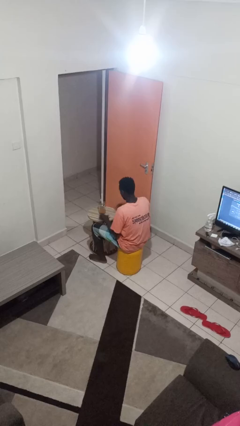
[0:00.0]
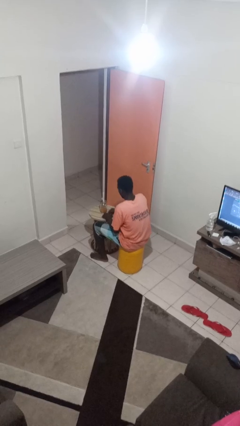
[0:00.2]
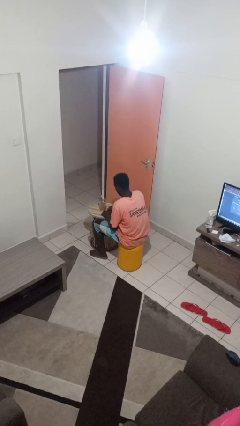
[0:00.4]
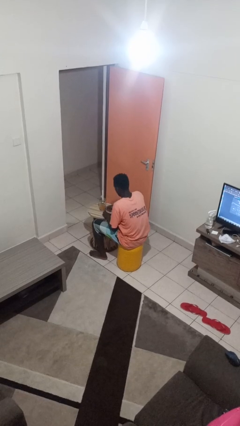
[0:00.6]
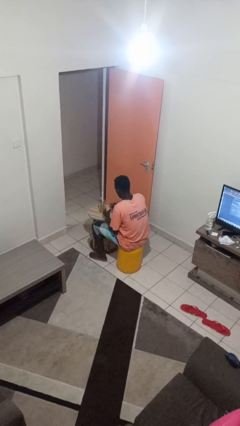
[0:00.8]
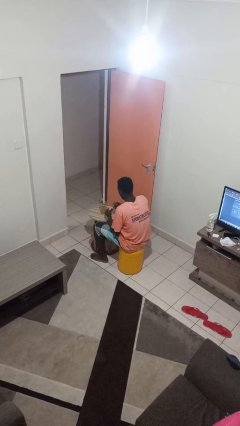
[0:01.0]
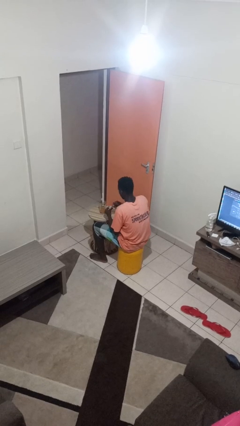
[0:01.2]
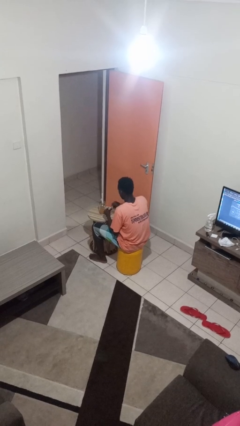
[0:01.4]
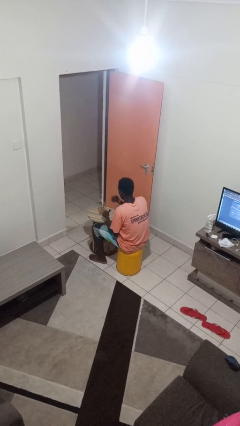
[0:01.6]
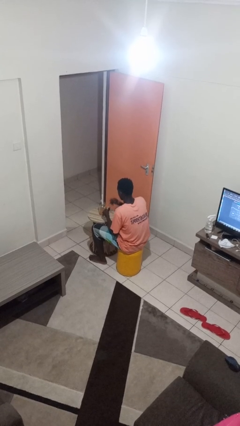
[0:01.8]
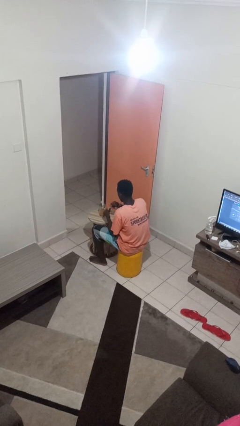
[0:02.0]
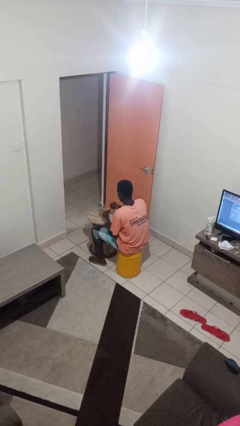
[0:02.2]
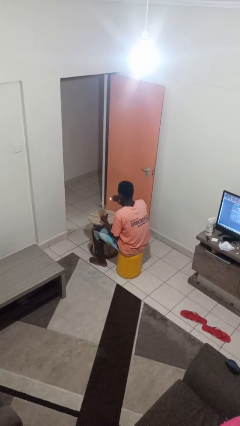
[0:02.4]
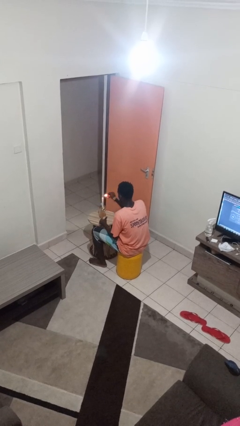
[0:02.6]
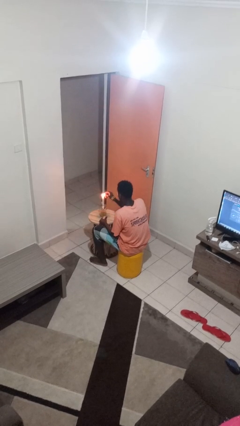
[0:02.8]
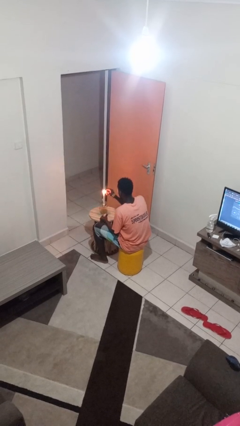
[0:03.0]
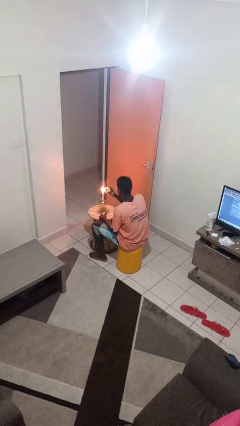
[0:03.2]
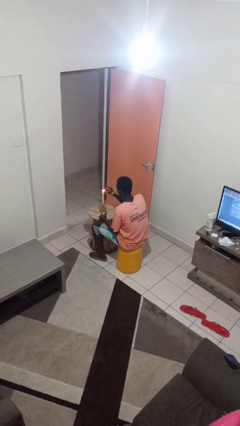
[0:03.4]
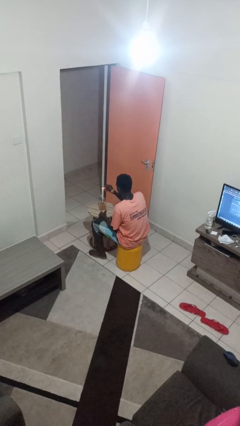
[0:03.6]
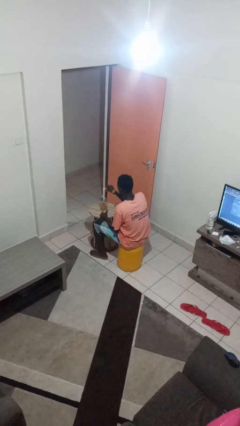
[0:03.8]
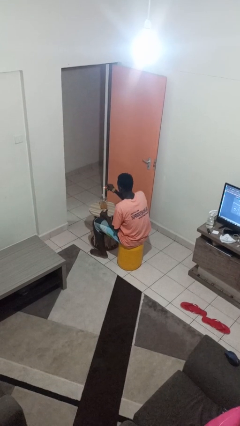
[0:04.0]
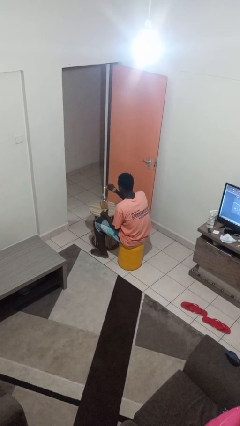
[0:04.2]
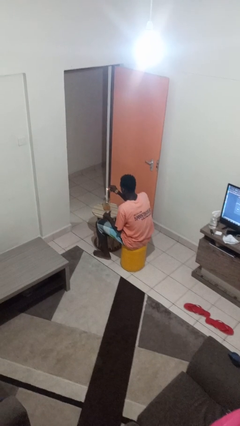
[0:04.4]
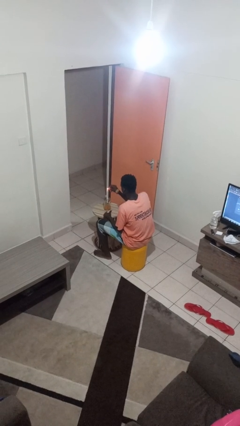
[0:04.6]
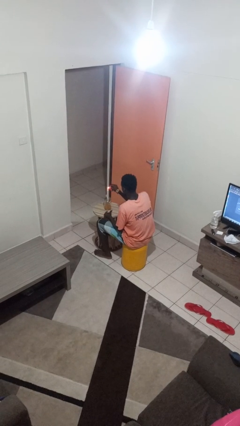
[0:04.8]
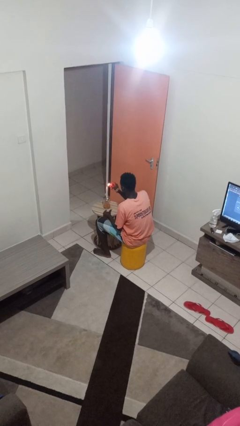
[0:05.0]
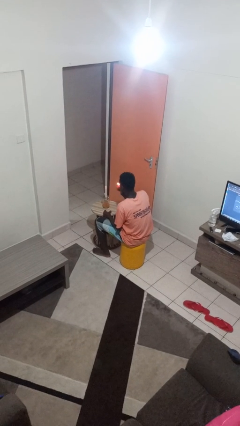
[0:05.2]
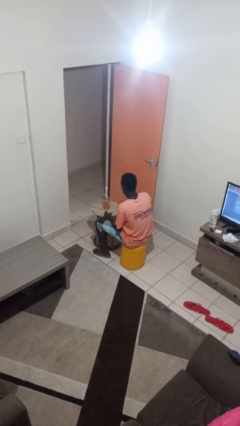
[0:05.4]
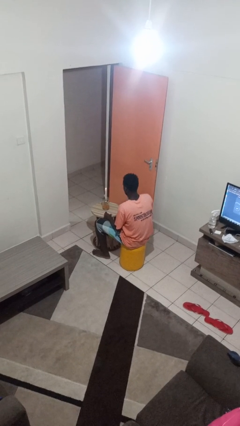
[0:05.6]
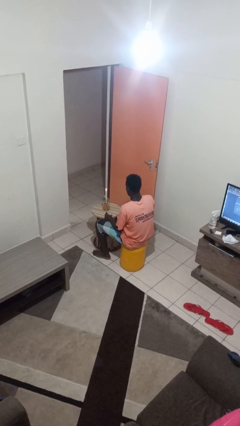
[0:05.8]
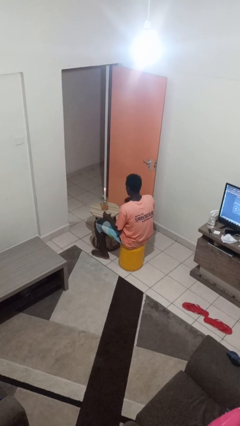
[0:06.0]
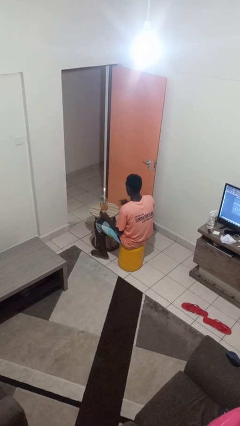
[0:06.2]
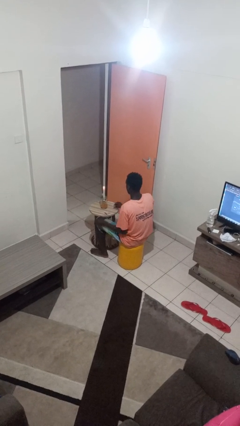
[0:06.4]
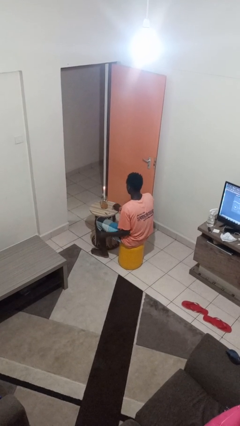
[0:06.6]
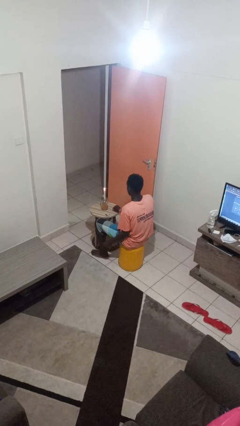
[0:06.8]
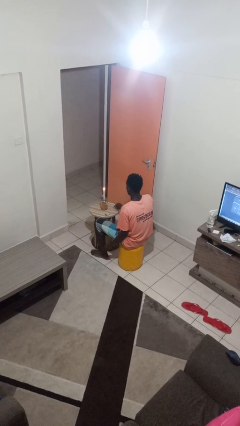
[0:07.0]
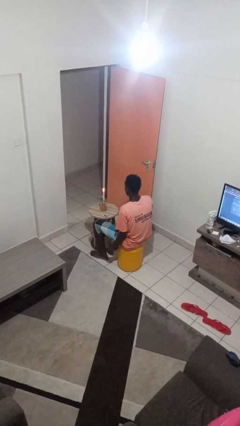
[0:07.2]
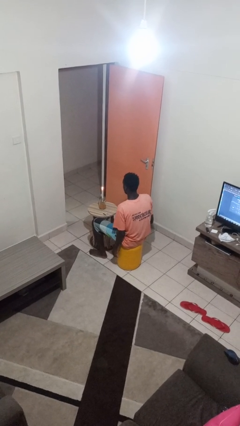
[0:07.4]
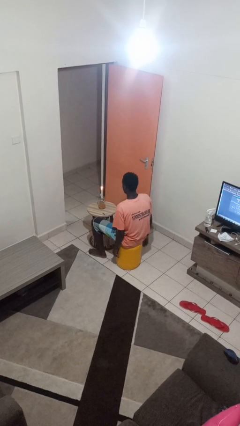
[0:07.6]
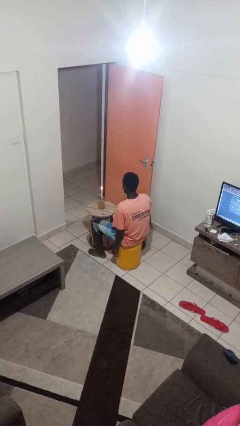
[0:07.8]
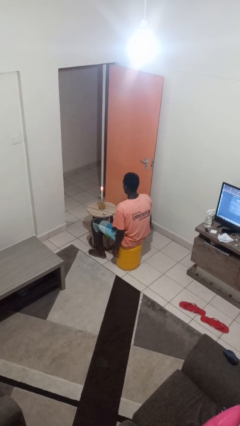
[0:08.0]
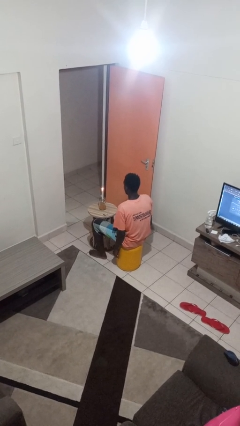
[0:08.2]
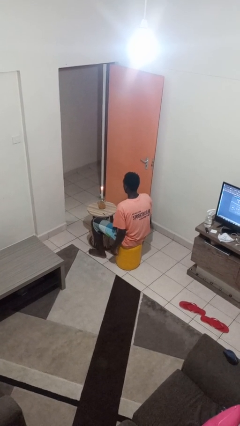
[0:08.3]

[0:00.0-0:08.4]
person lights candle

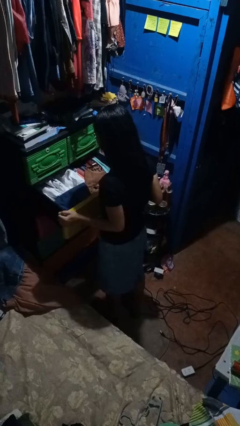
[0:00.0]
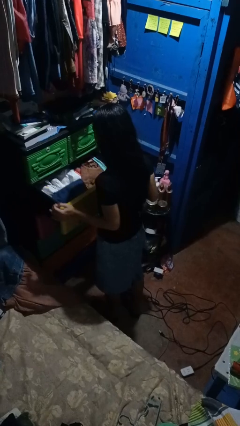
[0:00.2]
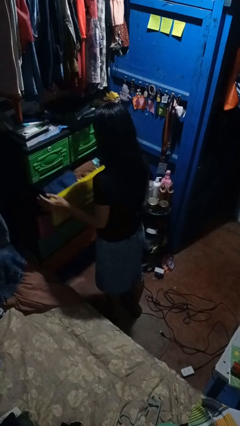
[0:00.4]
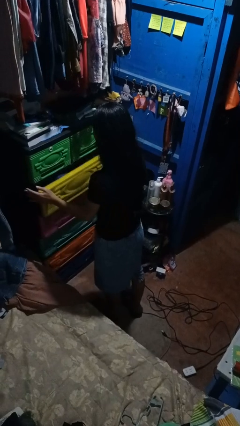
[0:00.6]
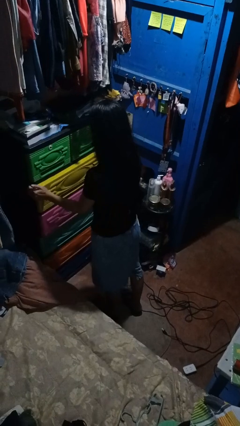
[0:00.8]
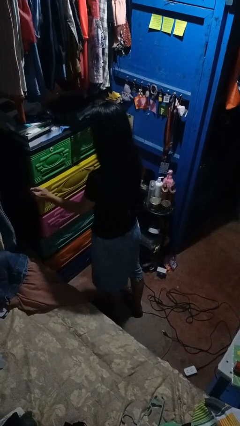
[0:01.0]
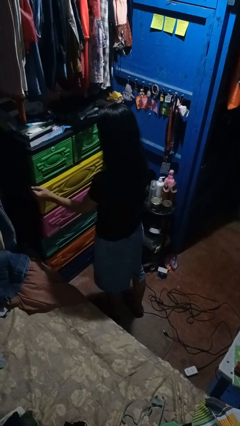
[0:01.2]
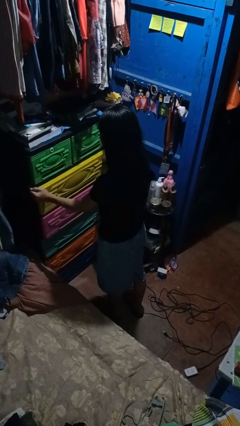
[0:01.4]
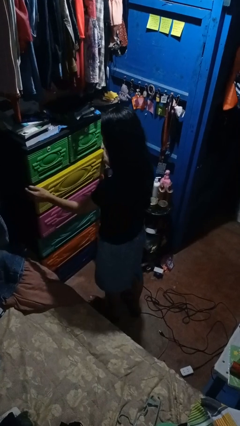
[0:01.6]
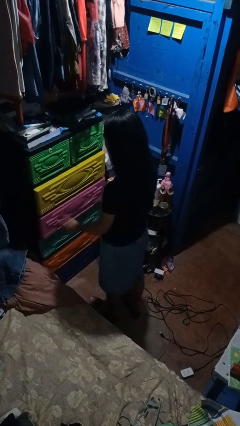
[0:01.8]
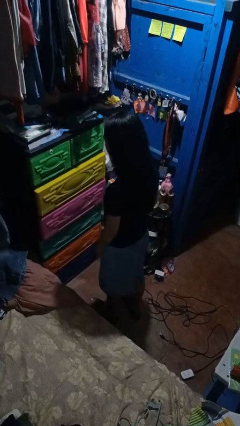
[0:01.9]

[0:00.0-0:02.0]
person closes dresser drawer

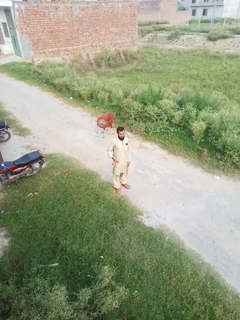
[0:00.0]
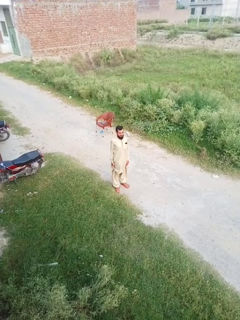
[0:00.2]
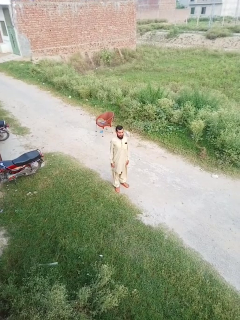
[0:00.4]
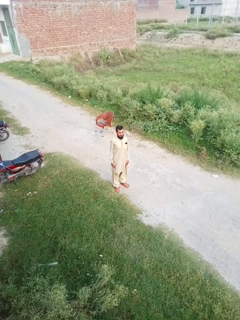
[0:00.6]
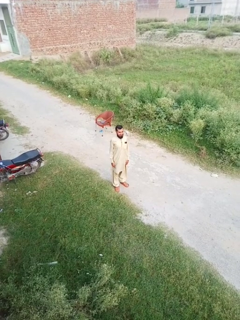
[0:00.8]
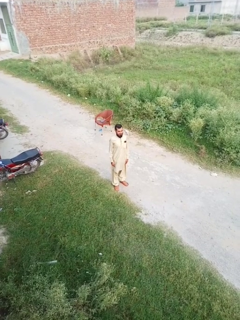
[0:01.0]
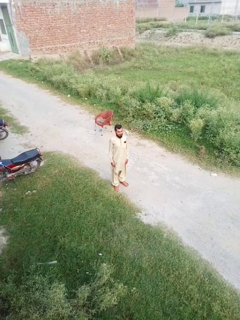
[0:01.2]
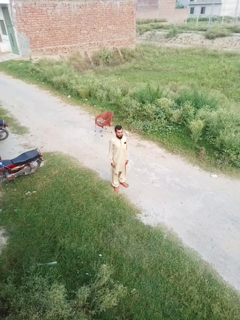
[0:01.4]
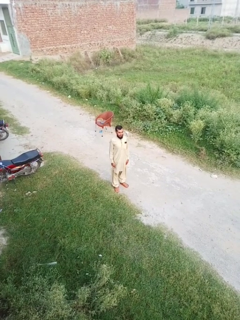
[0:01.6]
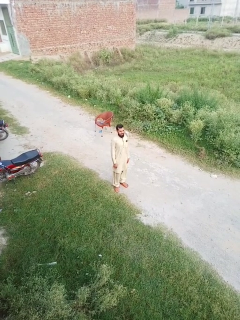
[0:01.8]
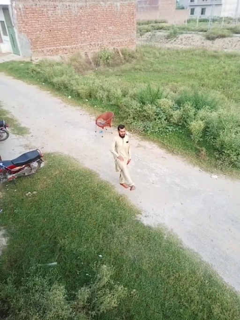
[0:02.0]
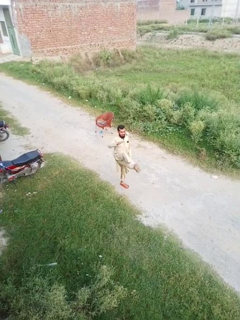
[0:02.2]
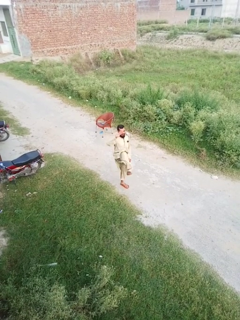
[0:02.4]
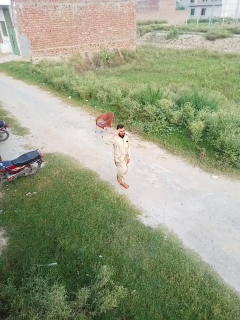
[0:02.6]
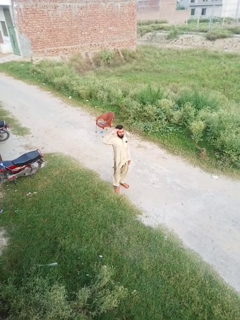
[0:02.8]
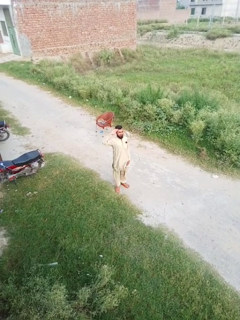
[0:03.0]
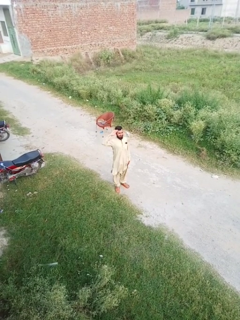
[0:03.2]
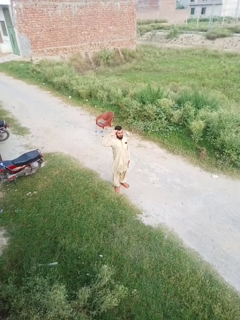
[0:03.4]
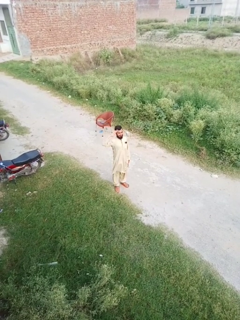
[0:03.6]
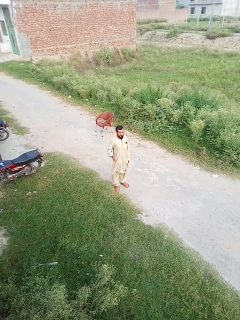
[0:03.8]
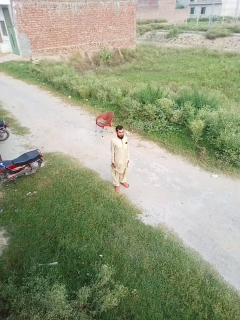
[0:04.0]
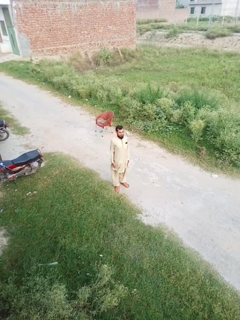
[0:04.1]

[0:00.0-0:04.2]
person salutes

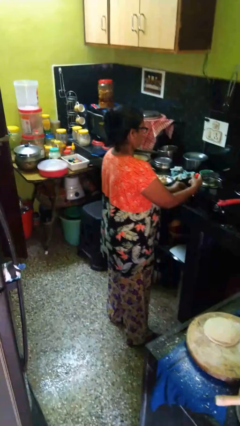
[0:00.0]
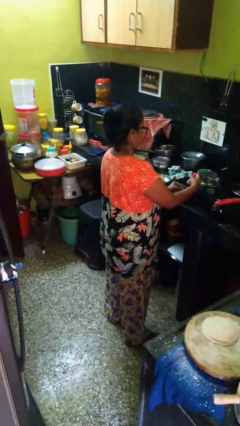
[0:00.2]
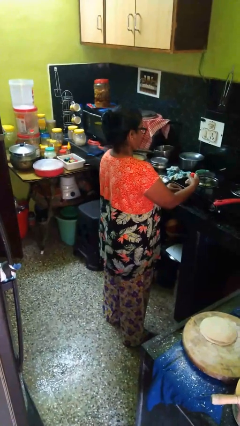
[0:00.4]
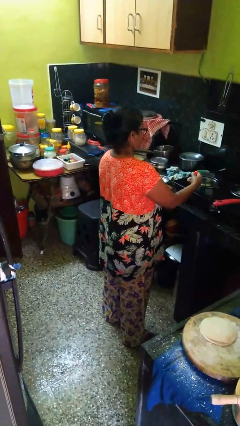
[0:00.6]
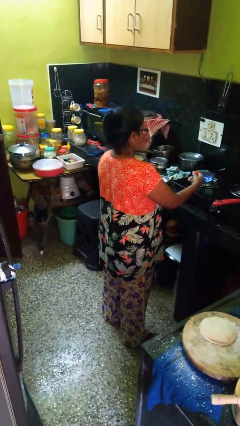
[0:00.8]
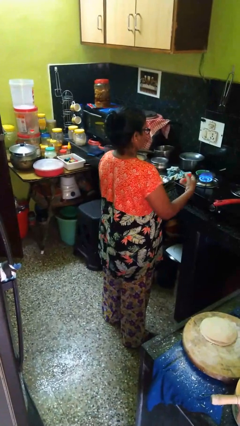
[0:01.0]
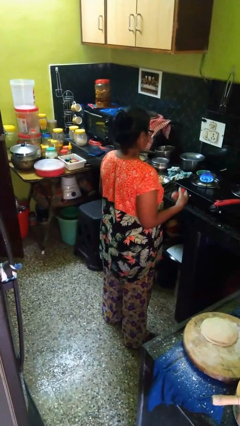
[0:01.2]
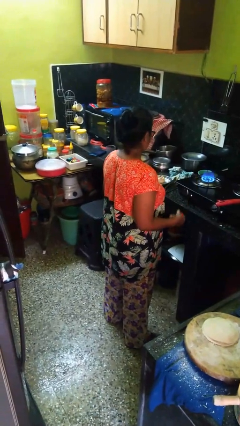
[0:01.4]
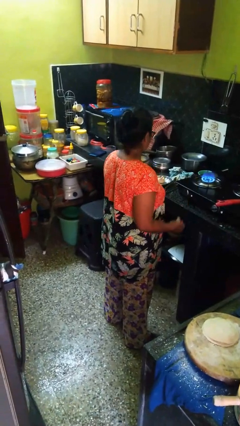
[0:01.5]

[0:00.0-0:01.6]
person turns on stovetop

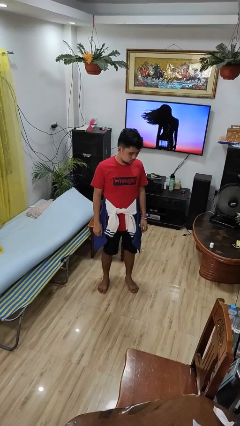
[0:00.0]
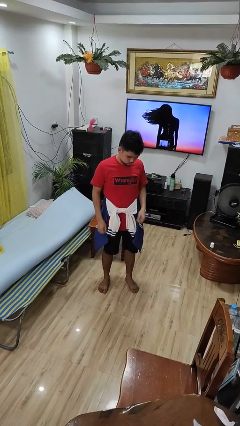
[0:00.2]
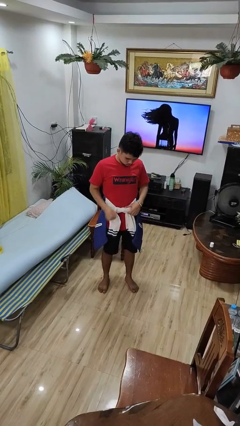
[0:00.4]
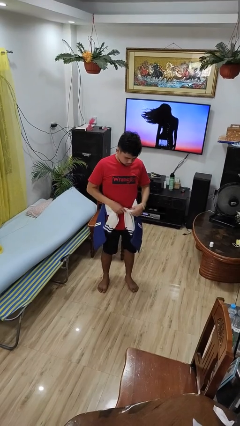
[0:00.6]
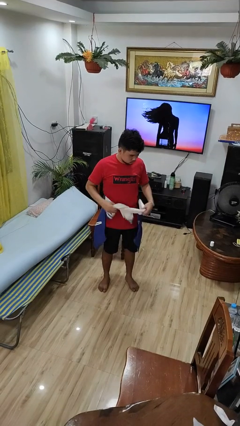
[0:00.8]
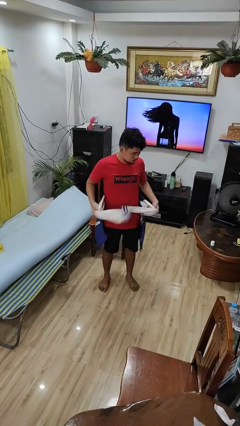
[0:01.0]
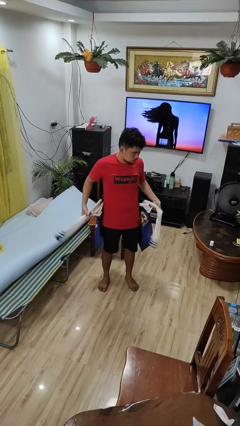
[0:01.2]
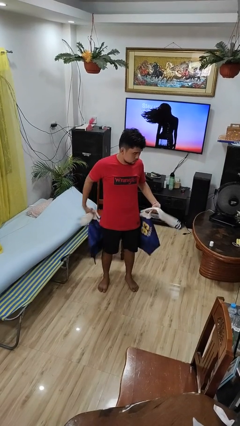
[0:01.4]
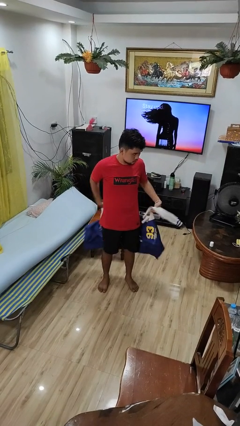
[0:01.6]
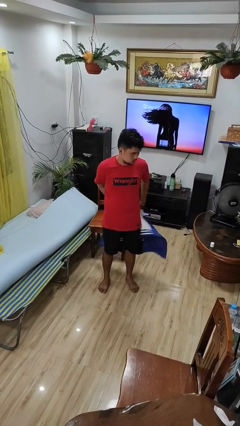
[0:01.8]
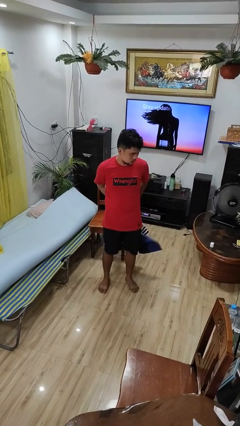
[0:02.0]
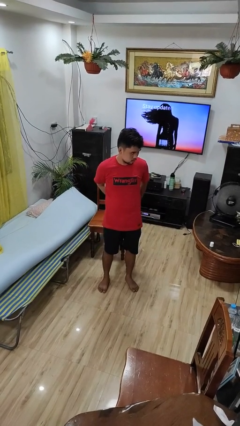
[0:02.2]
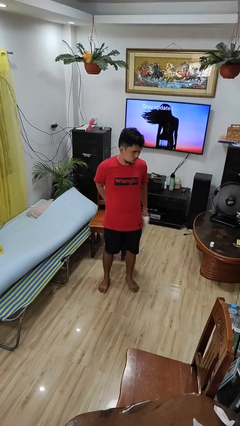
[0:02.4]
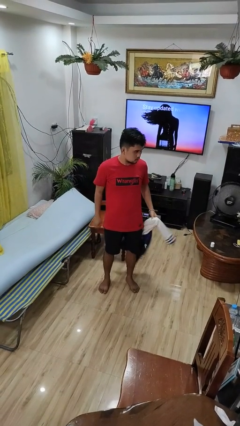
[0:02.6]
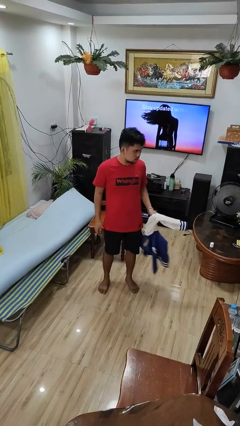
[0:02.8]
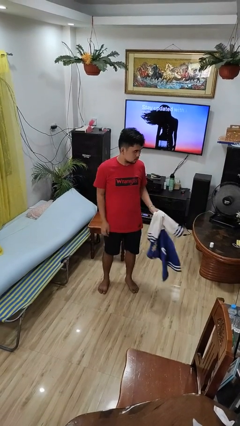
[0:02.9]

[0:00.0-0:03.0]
person unties jacket around waist
